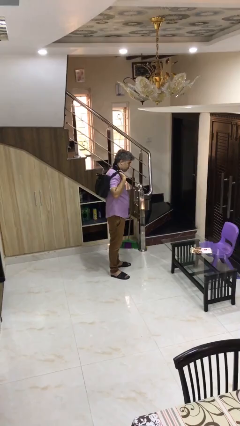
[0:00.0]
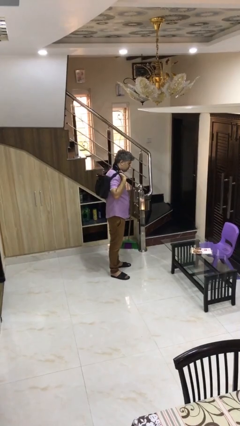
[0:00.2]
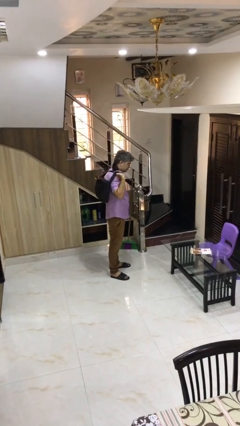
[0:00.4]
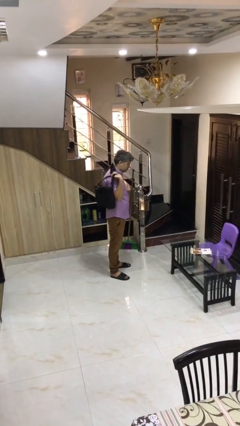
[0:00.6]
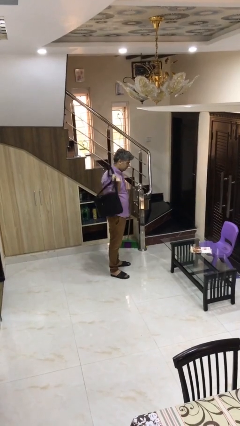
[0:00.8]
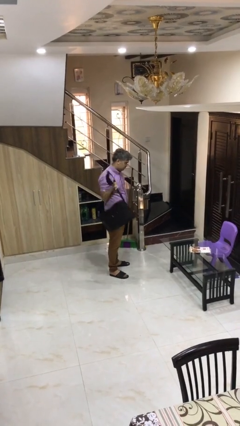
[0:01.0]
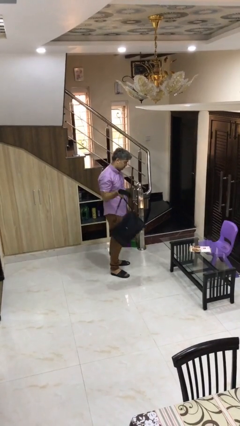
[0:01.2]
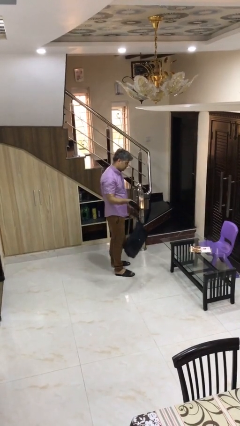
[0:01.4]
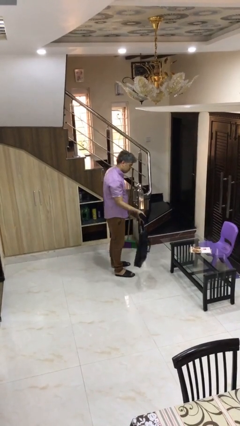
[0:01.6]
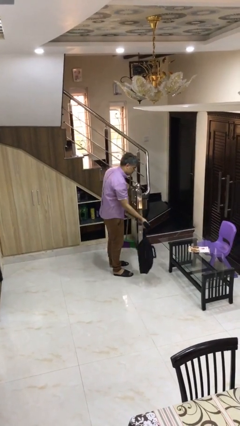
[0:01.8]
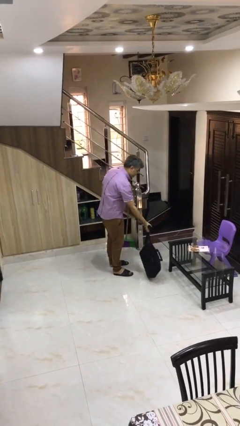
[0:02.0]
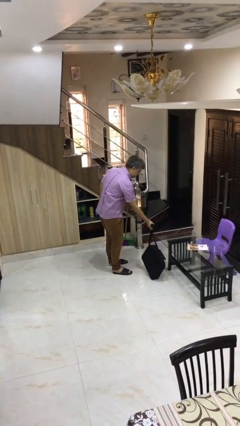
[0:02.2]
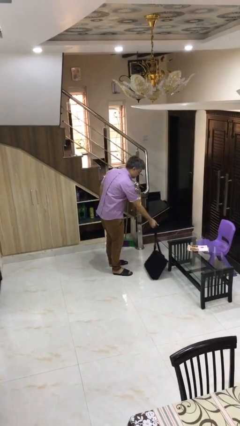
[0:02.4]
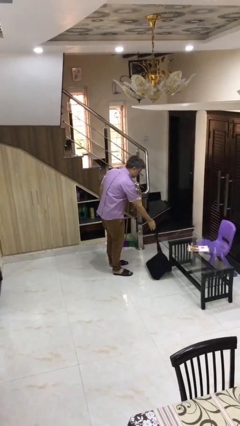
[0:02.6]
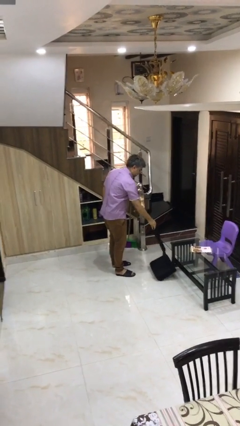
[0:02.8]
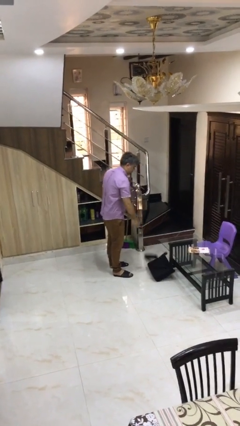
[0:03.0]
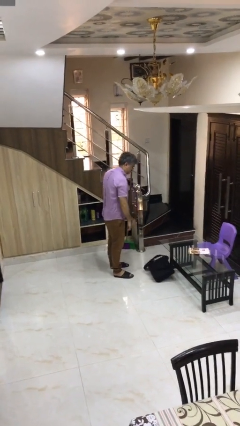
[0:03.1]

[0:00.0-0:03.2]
person puts down object on floor

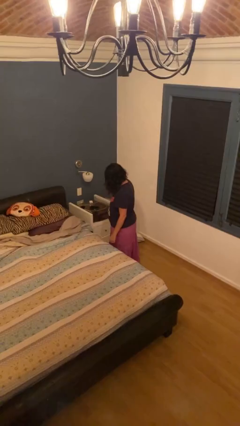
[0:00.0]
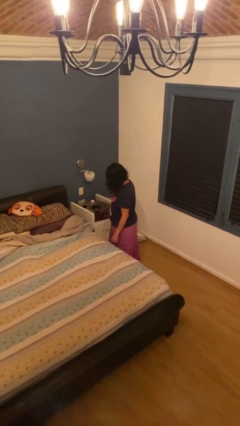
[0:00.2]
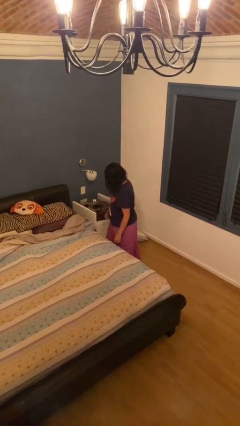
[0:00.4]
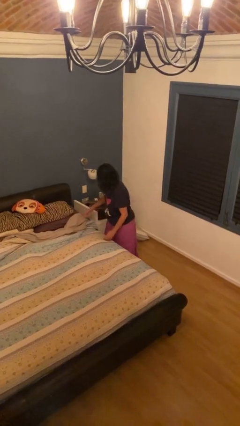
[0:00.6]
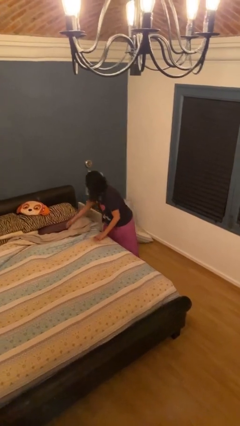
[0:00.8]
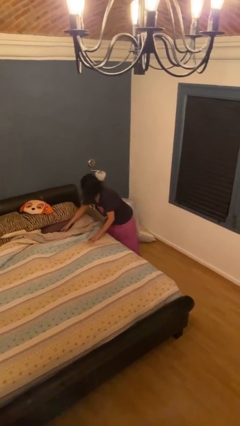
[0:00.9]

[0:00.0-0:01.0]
person makes bed

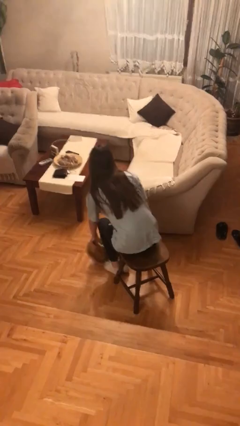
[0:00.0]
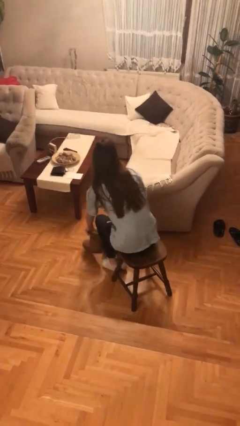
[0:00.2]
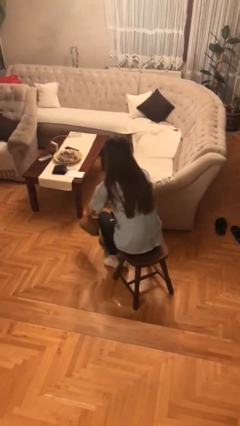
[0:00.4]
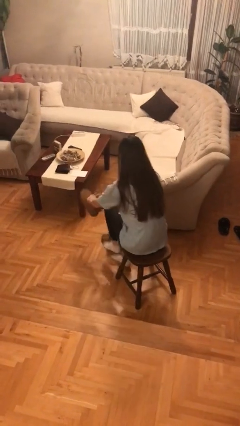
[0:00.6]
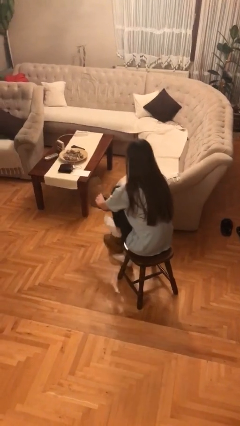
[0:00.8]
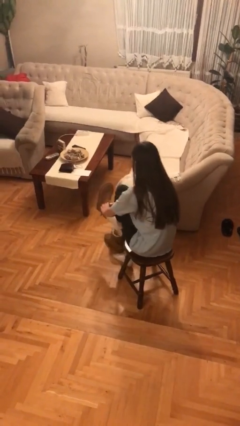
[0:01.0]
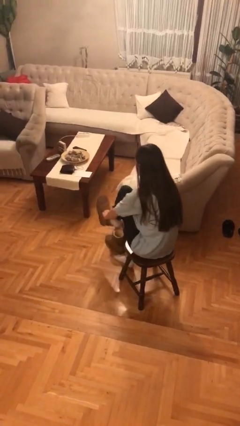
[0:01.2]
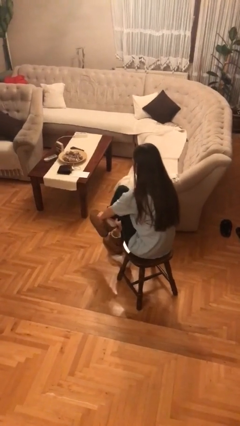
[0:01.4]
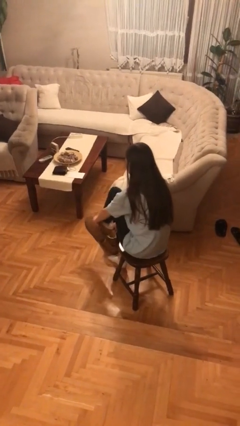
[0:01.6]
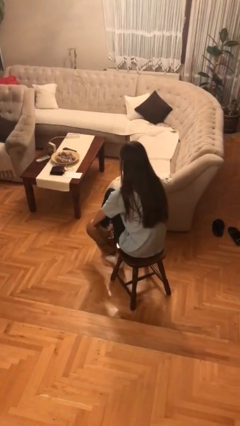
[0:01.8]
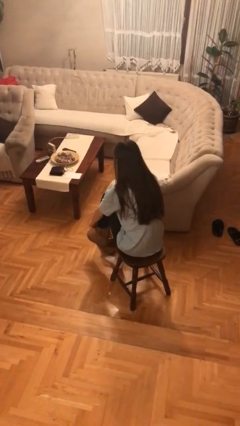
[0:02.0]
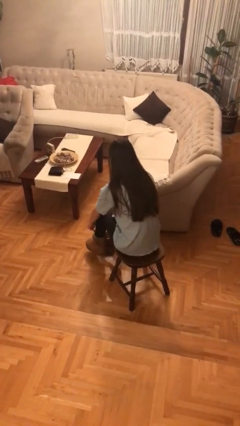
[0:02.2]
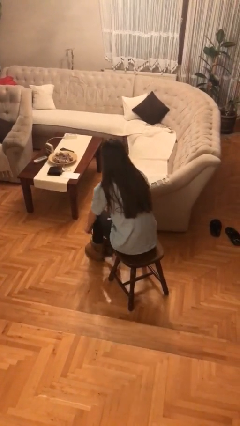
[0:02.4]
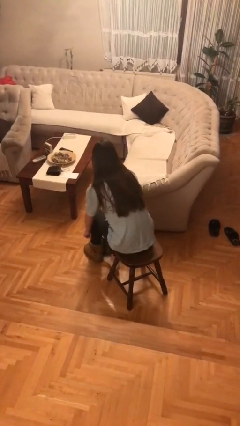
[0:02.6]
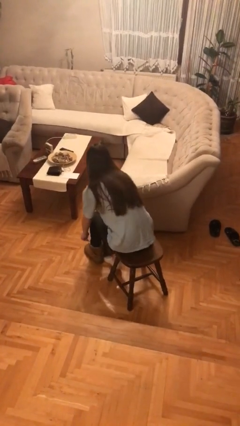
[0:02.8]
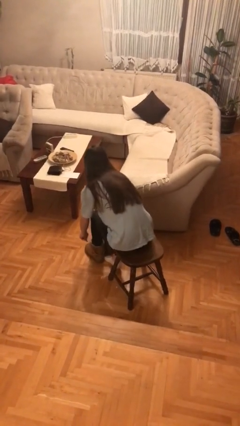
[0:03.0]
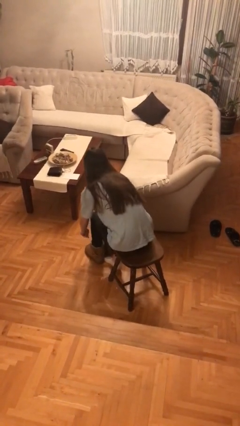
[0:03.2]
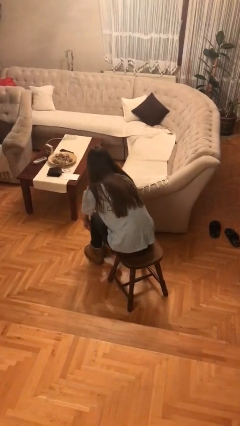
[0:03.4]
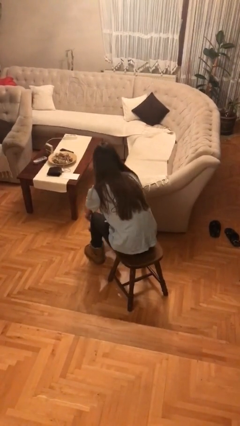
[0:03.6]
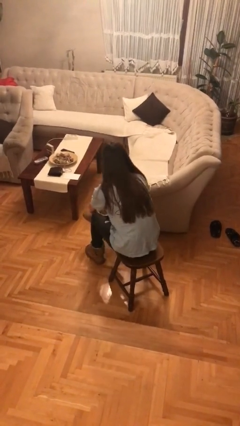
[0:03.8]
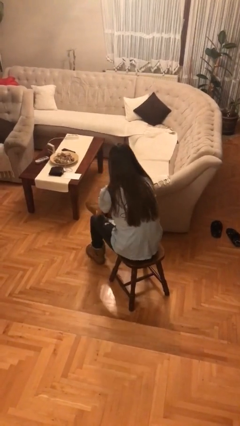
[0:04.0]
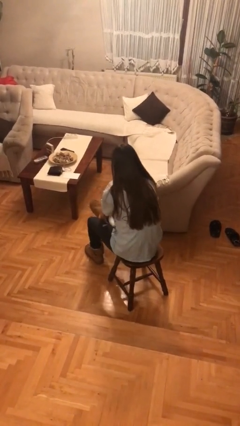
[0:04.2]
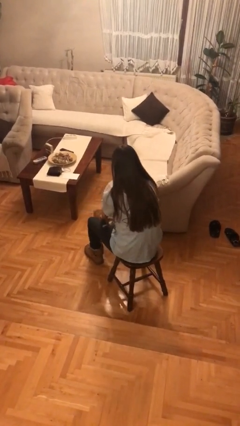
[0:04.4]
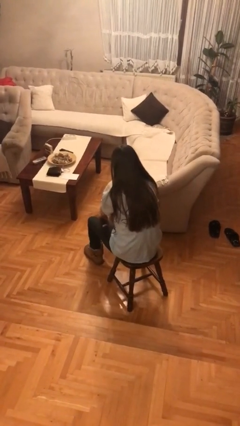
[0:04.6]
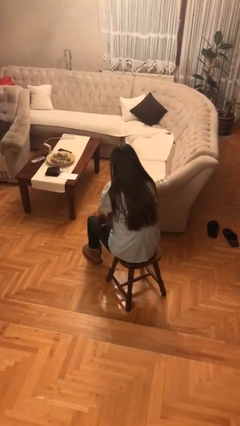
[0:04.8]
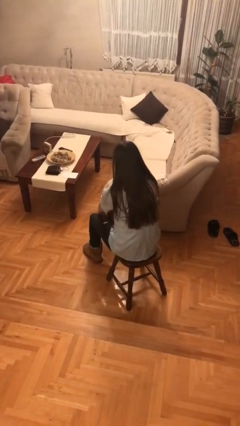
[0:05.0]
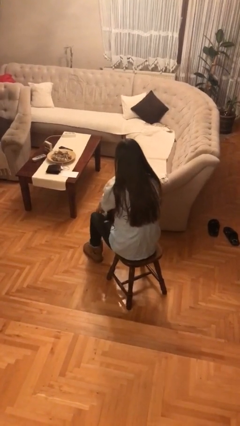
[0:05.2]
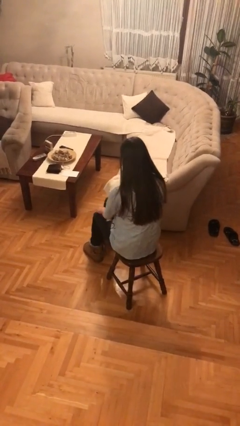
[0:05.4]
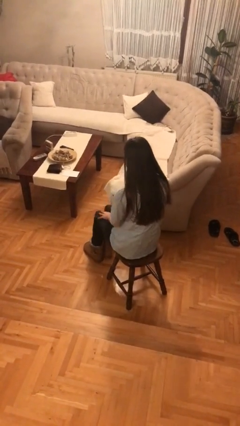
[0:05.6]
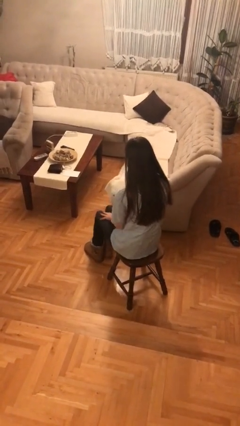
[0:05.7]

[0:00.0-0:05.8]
person puts on shoes

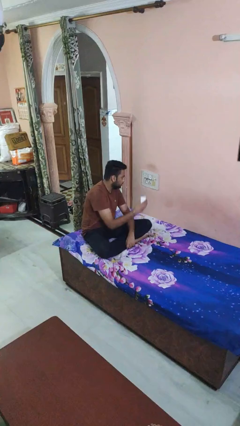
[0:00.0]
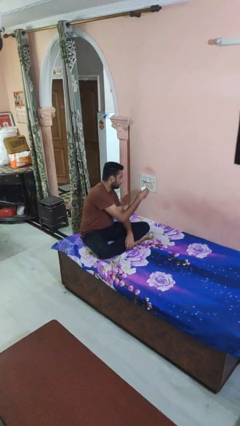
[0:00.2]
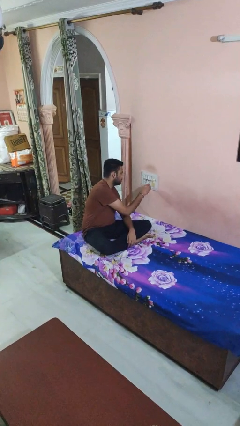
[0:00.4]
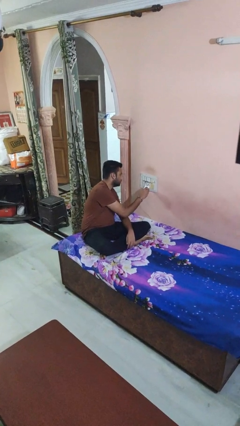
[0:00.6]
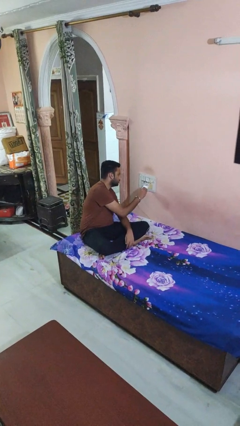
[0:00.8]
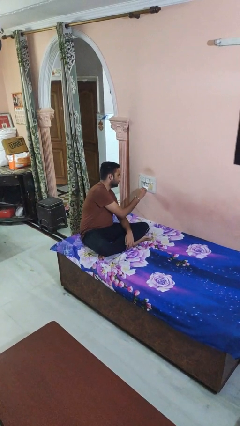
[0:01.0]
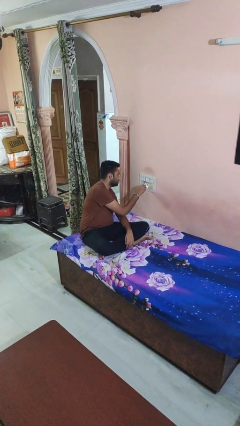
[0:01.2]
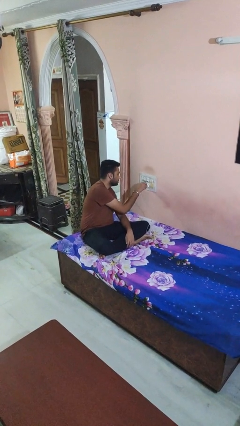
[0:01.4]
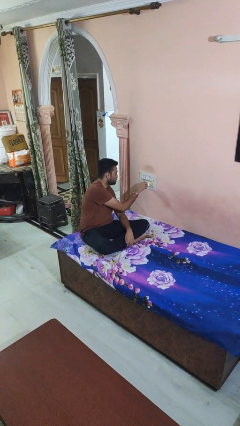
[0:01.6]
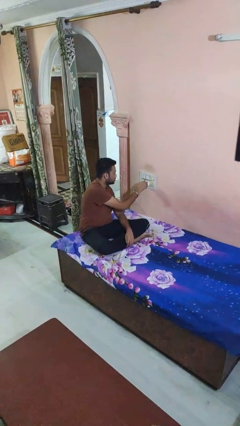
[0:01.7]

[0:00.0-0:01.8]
person plugs into electrical socket

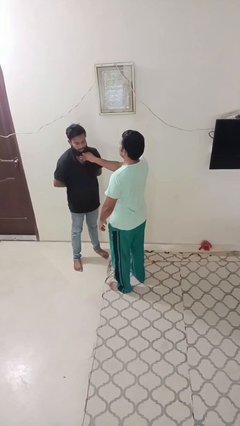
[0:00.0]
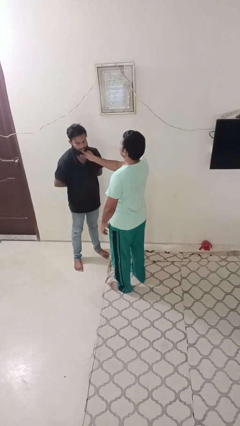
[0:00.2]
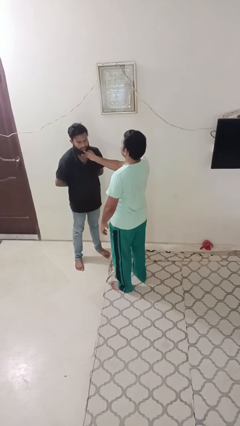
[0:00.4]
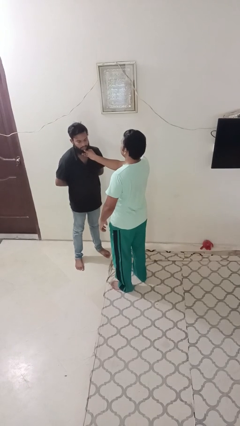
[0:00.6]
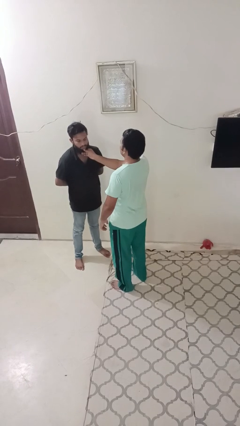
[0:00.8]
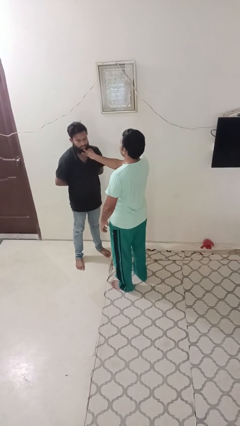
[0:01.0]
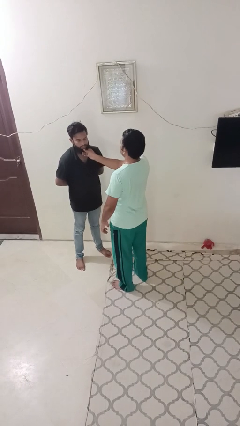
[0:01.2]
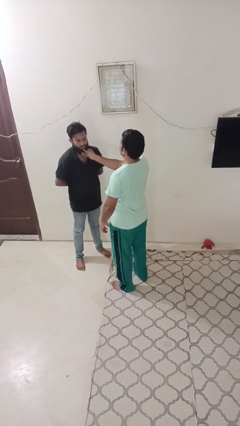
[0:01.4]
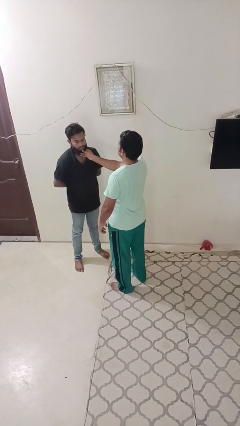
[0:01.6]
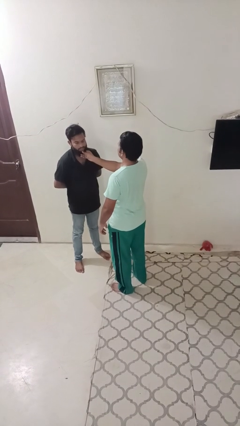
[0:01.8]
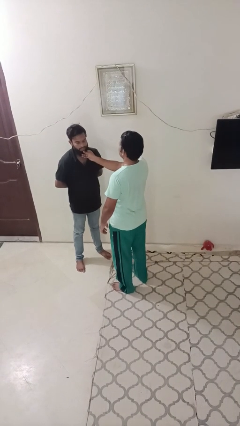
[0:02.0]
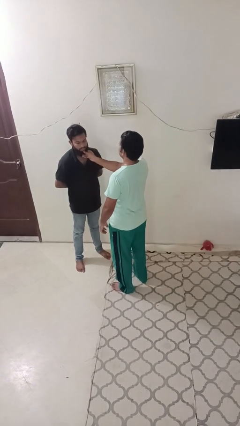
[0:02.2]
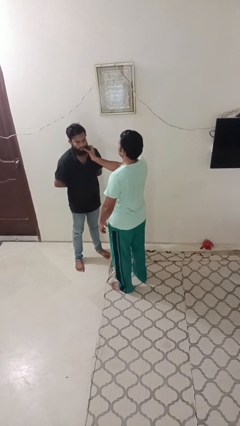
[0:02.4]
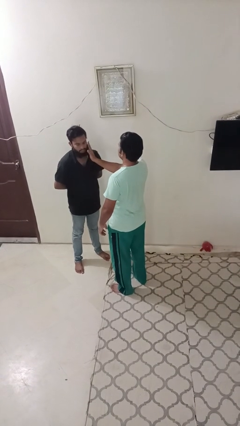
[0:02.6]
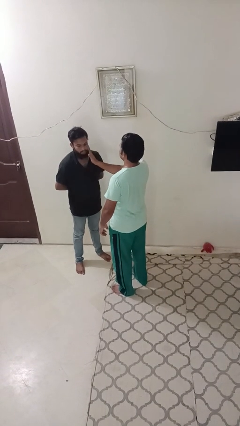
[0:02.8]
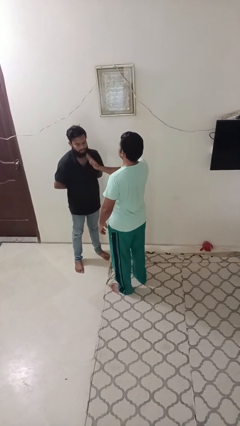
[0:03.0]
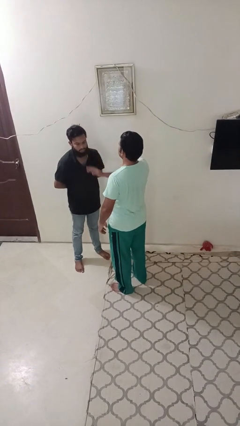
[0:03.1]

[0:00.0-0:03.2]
person touches face of person

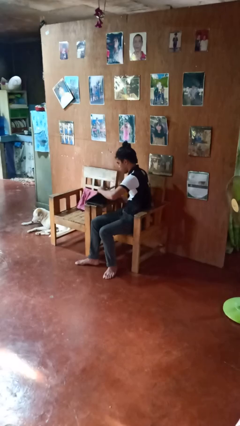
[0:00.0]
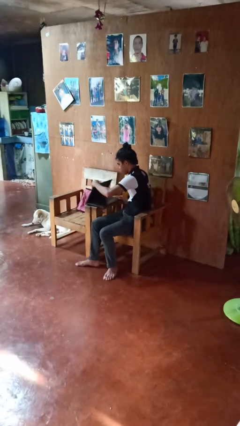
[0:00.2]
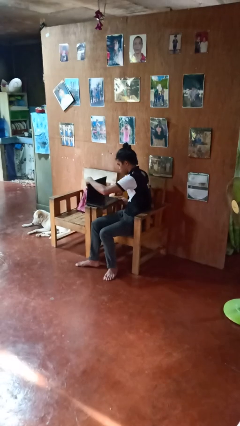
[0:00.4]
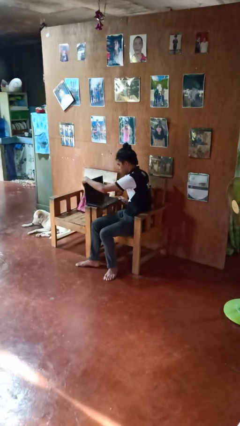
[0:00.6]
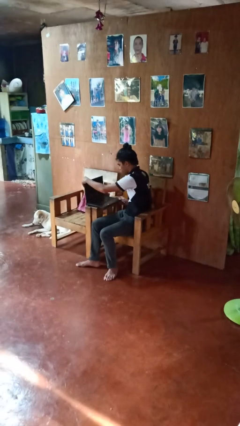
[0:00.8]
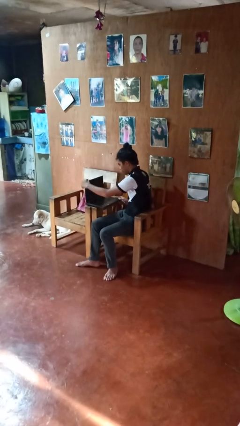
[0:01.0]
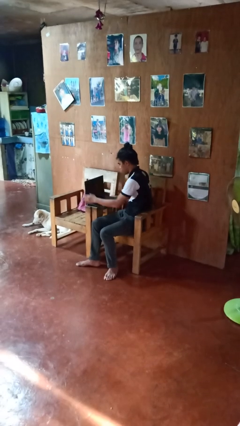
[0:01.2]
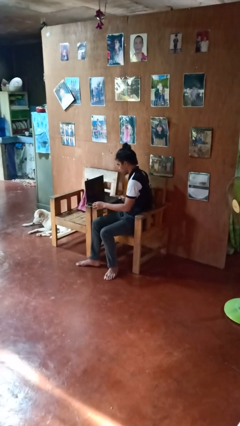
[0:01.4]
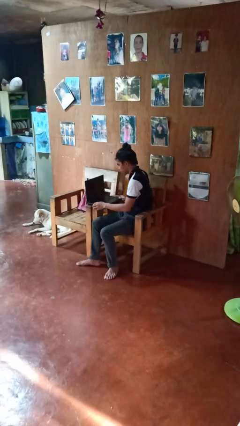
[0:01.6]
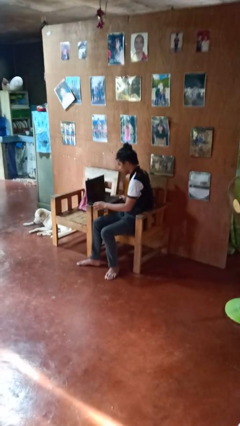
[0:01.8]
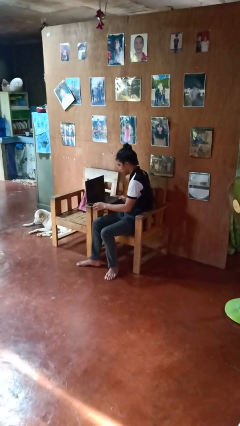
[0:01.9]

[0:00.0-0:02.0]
person opens laptop

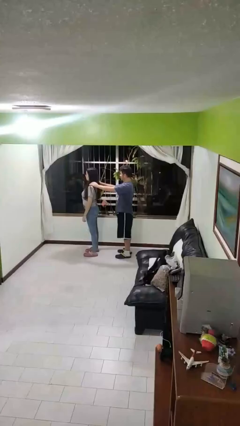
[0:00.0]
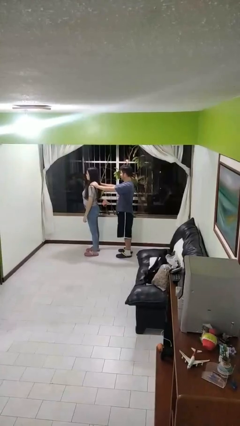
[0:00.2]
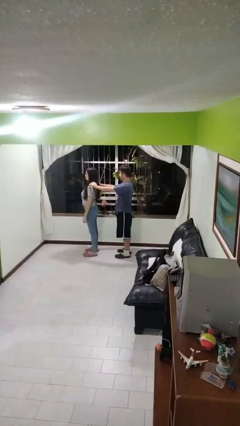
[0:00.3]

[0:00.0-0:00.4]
person grabs person by shoulder
